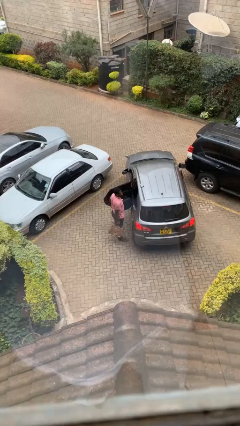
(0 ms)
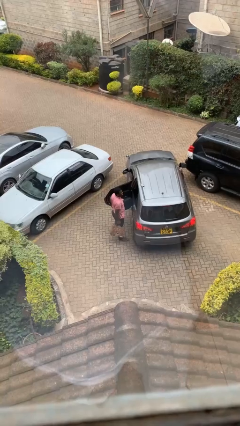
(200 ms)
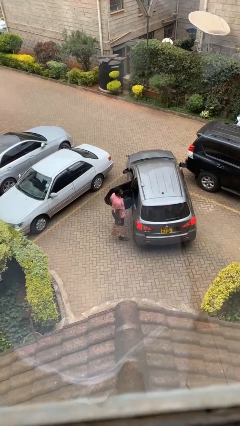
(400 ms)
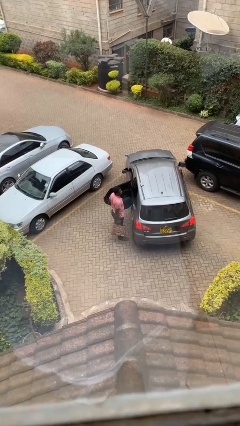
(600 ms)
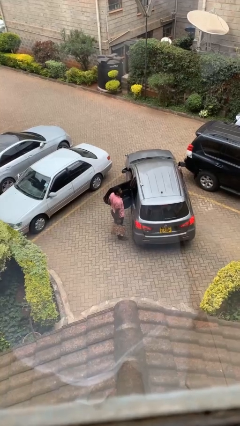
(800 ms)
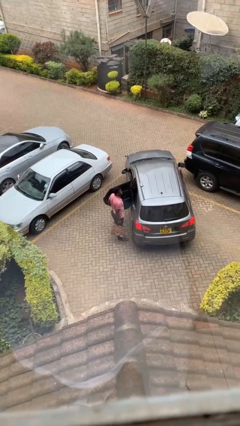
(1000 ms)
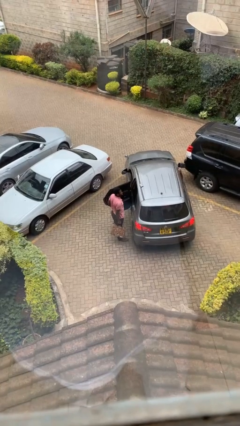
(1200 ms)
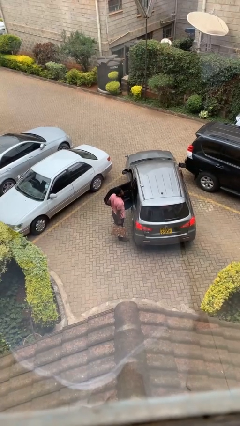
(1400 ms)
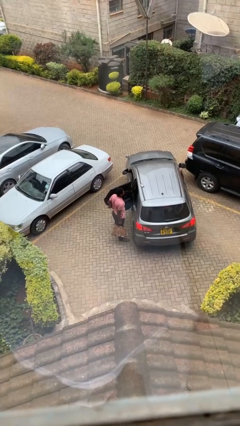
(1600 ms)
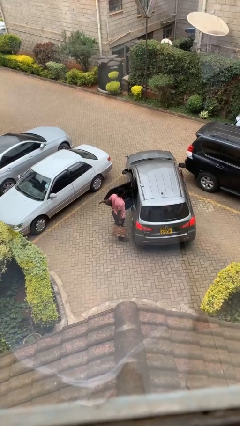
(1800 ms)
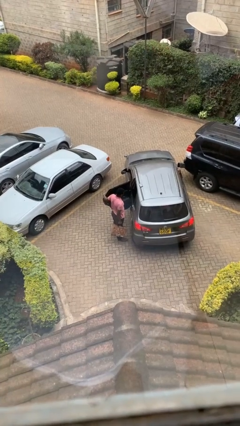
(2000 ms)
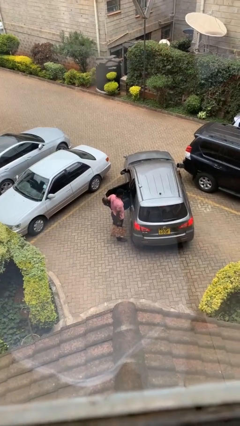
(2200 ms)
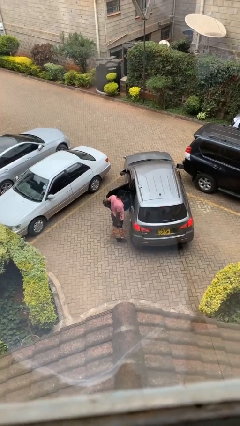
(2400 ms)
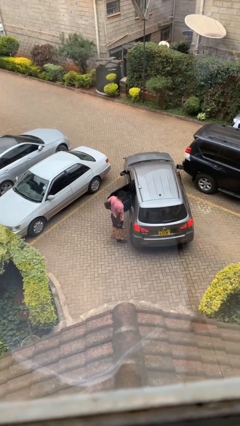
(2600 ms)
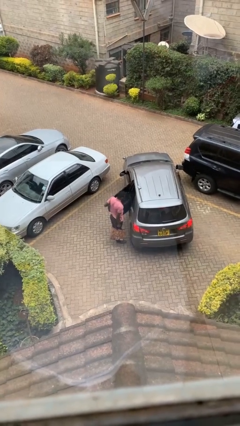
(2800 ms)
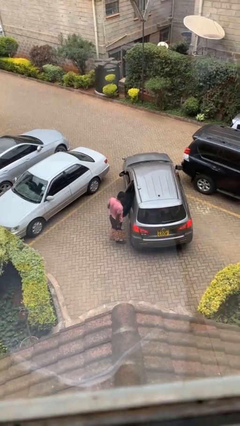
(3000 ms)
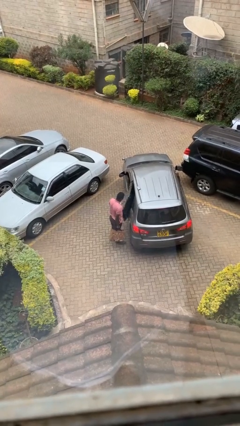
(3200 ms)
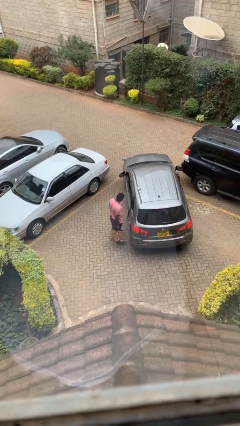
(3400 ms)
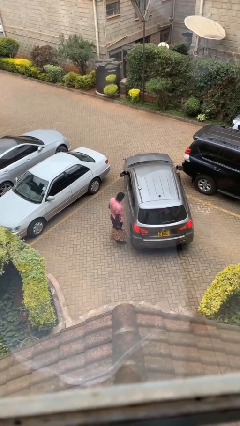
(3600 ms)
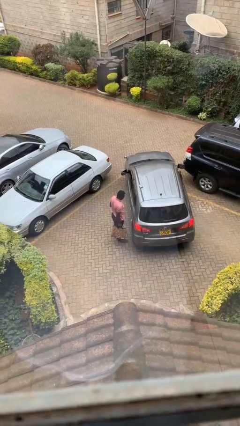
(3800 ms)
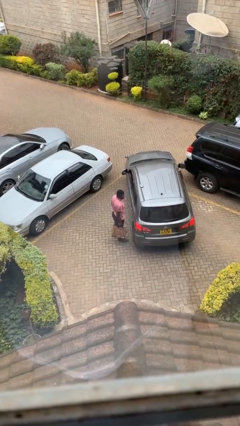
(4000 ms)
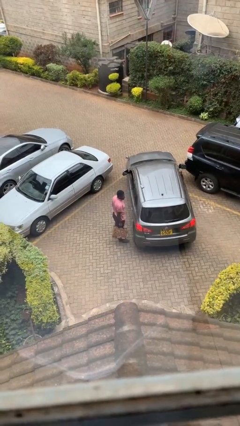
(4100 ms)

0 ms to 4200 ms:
person closes car door

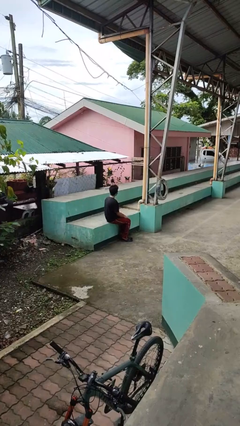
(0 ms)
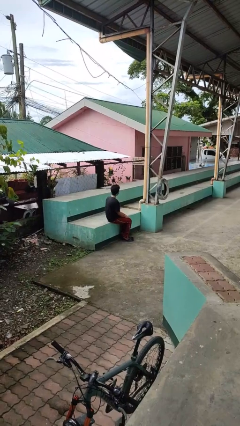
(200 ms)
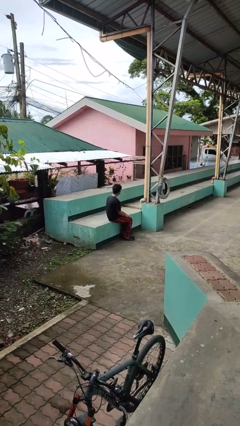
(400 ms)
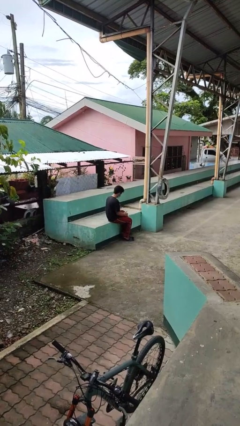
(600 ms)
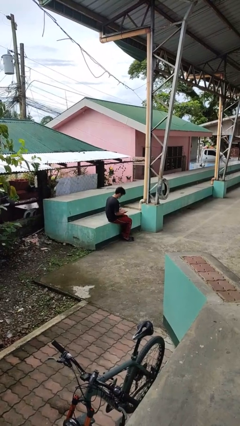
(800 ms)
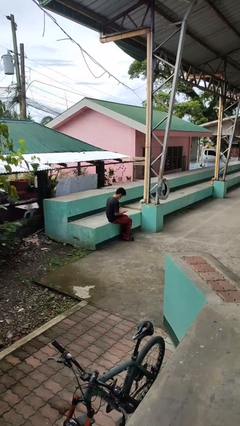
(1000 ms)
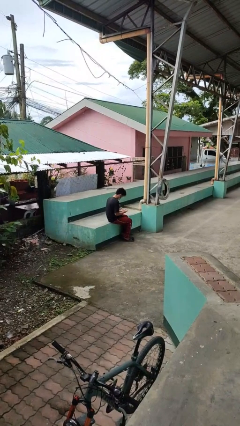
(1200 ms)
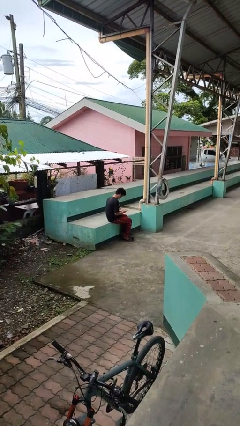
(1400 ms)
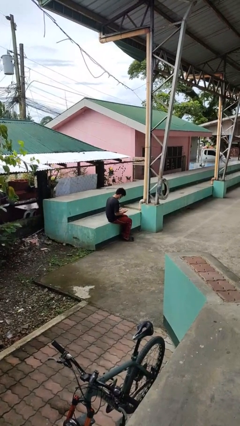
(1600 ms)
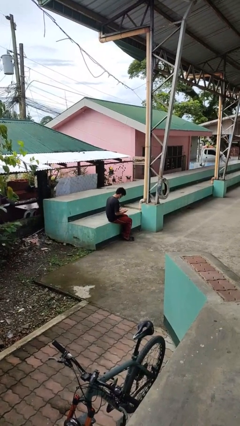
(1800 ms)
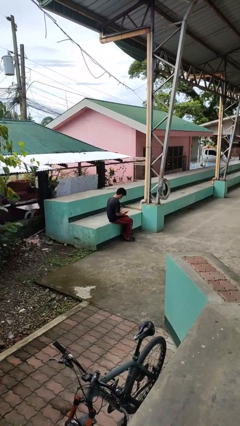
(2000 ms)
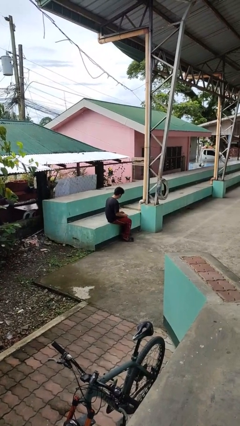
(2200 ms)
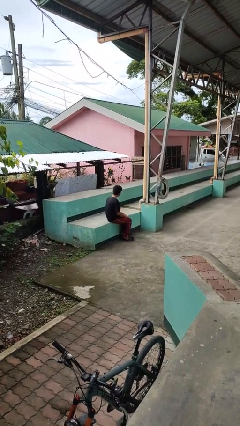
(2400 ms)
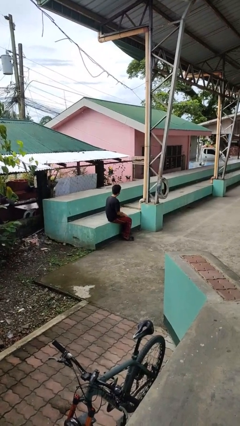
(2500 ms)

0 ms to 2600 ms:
person looks at hands in lap

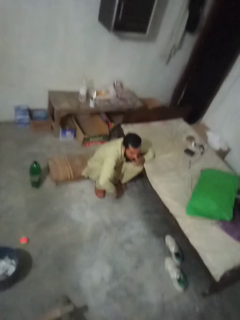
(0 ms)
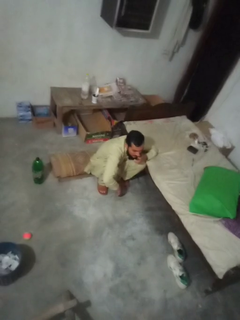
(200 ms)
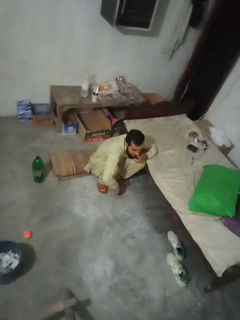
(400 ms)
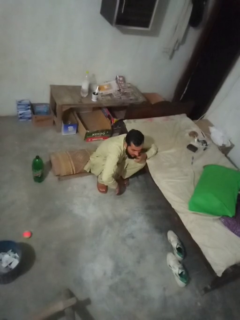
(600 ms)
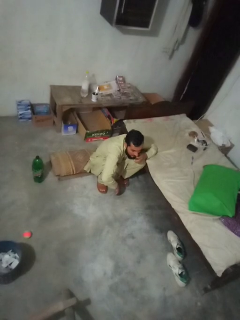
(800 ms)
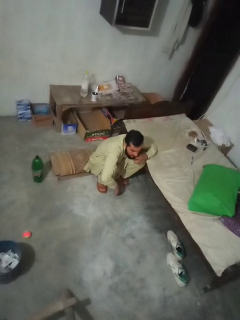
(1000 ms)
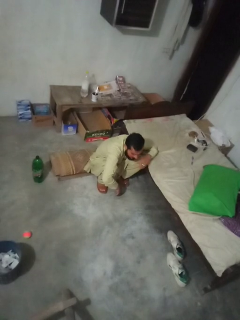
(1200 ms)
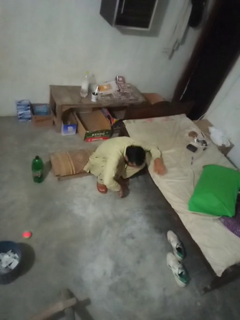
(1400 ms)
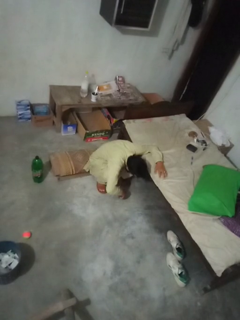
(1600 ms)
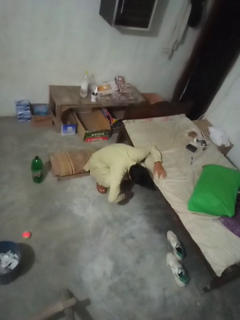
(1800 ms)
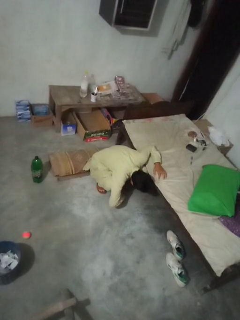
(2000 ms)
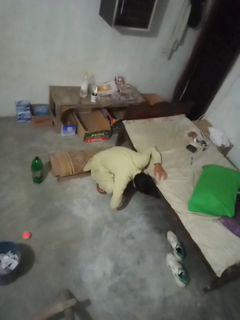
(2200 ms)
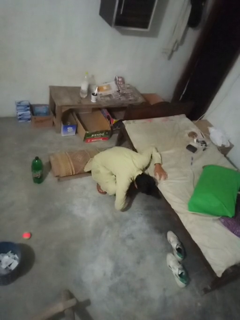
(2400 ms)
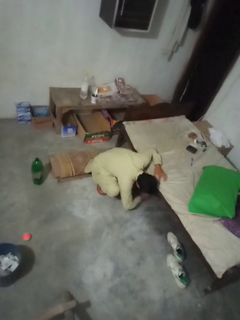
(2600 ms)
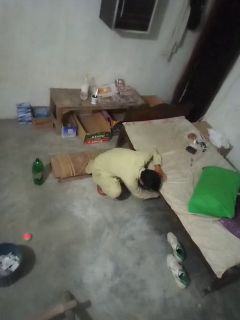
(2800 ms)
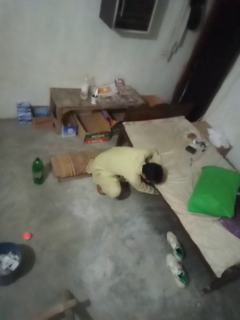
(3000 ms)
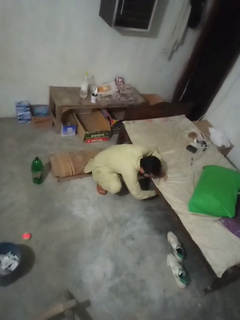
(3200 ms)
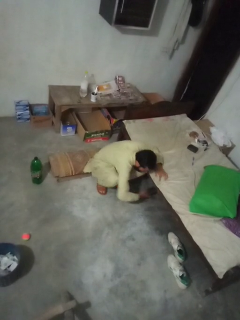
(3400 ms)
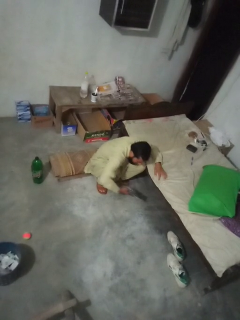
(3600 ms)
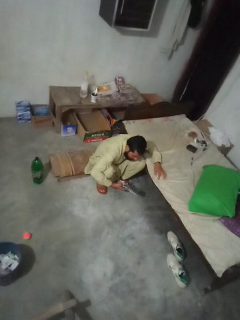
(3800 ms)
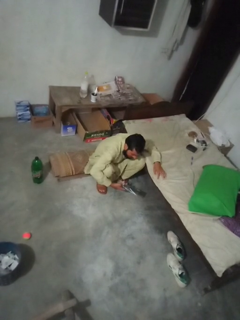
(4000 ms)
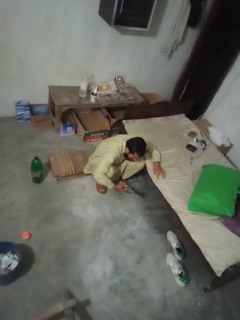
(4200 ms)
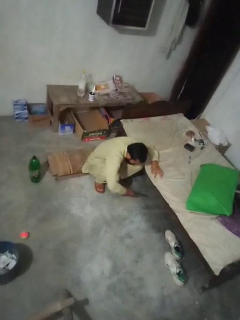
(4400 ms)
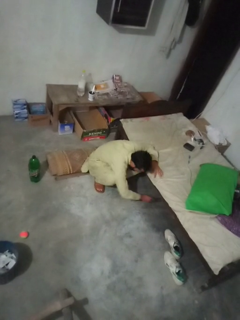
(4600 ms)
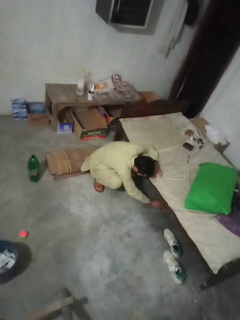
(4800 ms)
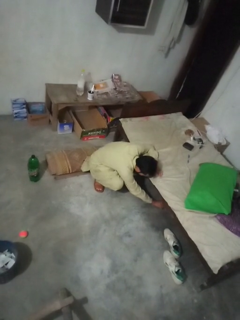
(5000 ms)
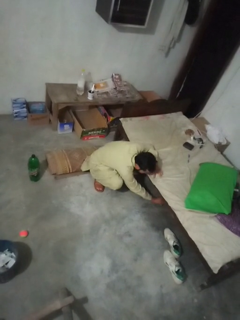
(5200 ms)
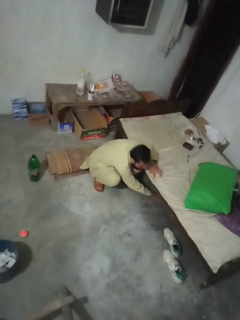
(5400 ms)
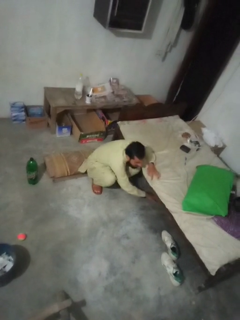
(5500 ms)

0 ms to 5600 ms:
person searches under couch

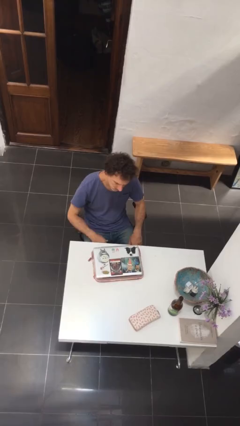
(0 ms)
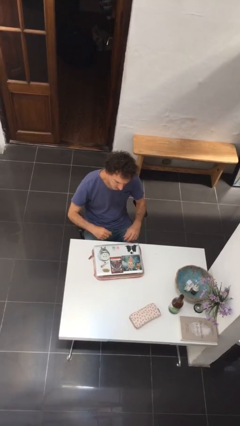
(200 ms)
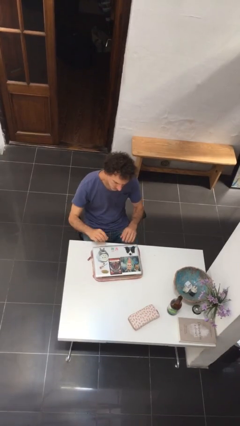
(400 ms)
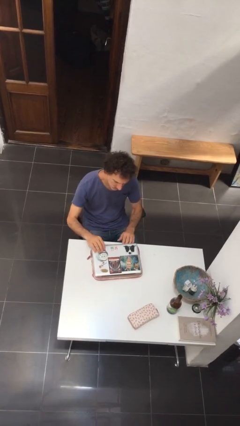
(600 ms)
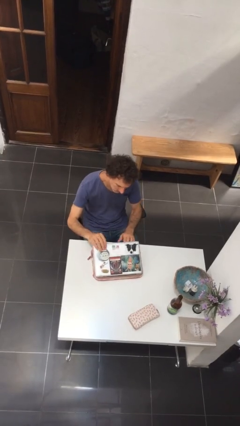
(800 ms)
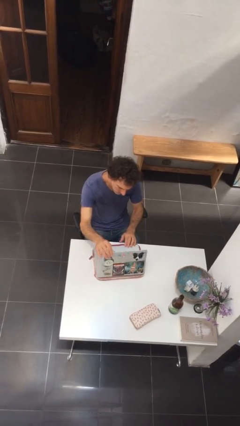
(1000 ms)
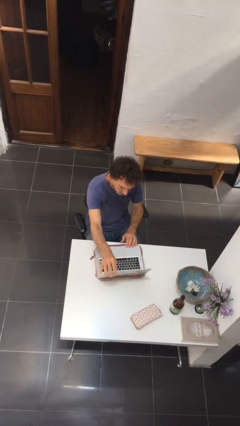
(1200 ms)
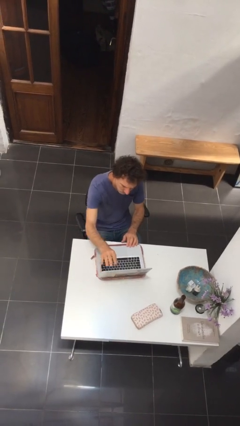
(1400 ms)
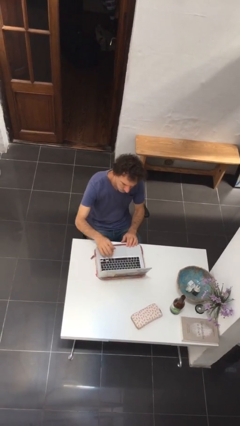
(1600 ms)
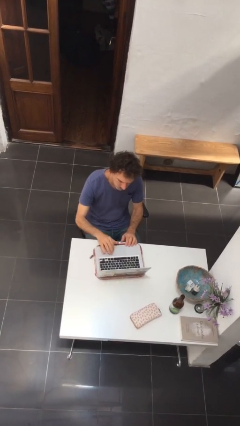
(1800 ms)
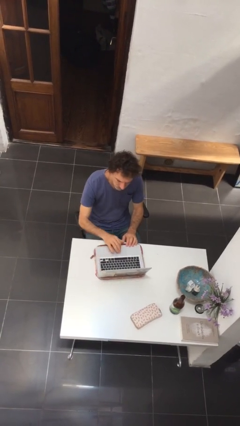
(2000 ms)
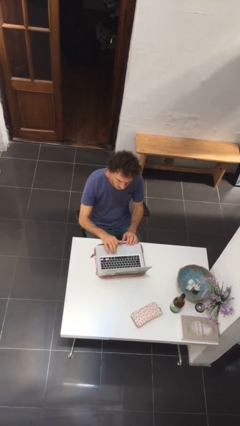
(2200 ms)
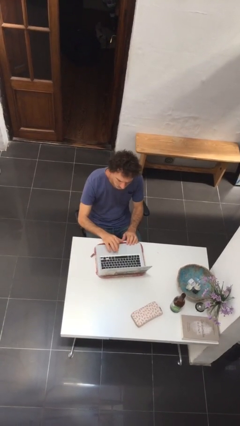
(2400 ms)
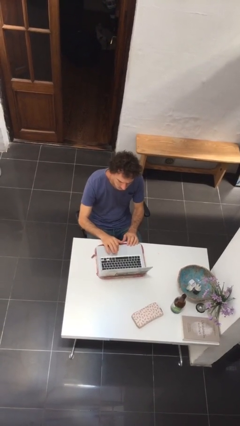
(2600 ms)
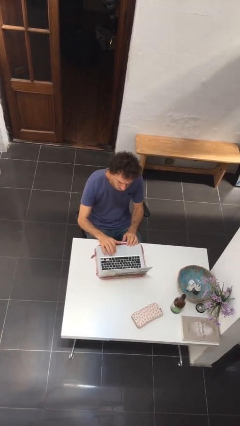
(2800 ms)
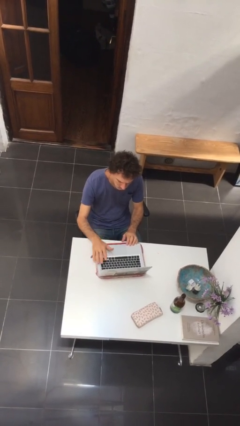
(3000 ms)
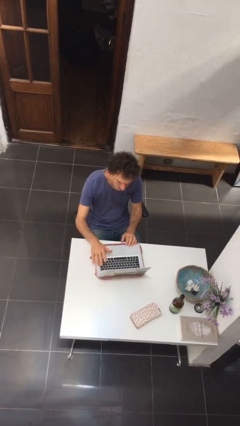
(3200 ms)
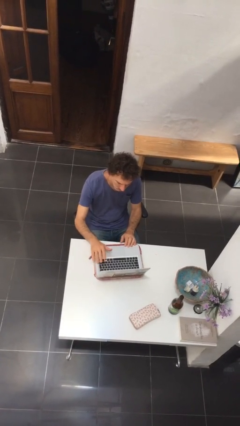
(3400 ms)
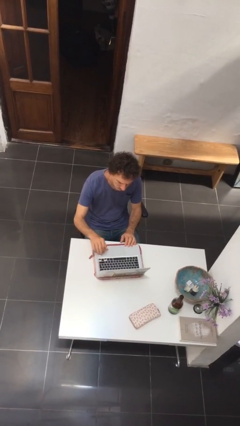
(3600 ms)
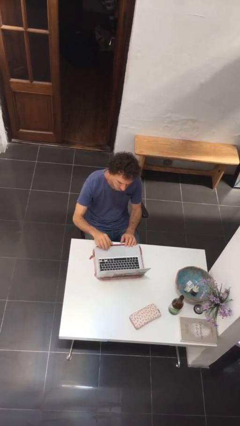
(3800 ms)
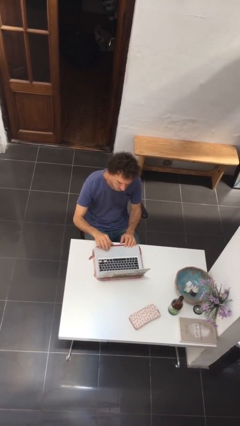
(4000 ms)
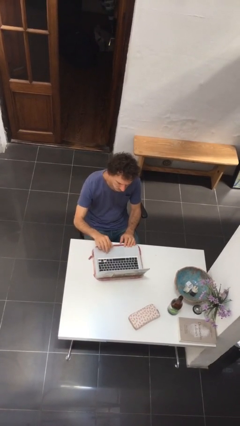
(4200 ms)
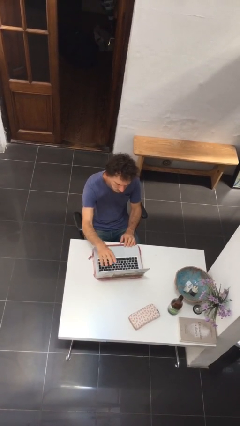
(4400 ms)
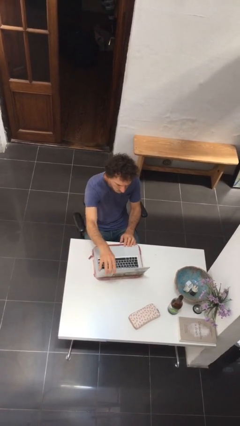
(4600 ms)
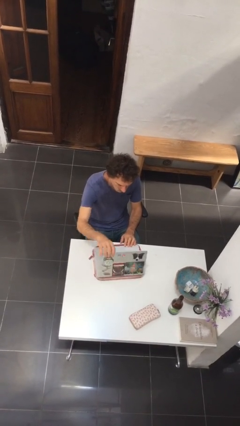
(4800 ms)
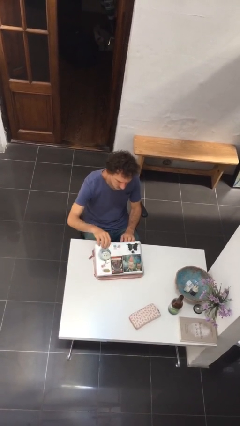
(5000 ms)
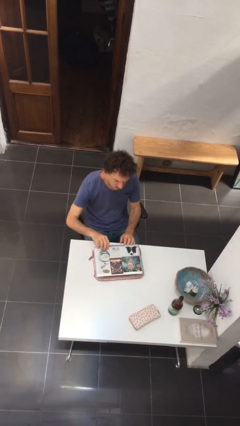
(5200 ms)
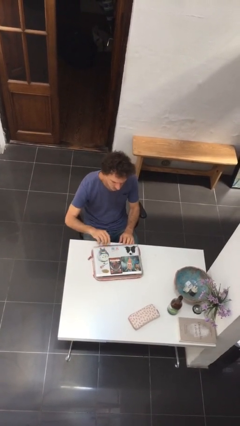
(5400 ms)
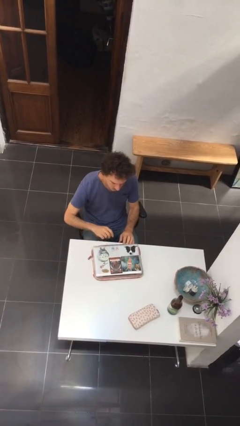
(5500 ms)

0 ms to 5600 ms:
person interacts with laptop

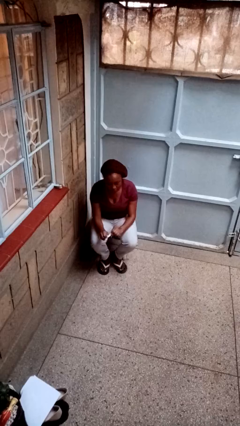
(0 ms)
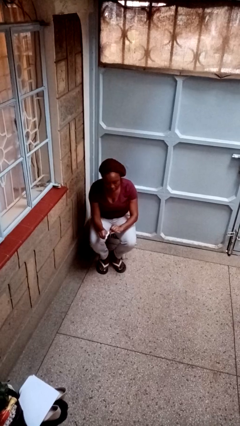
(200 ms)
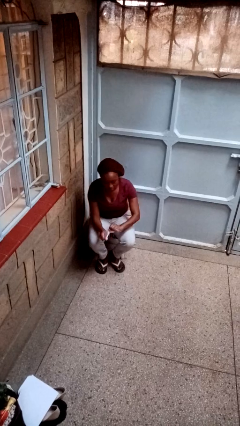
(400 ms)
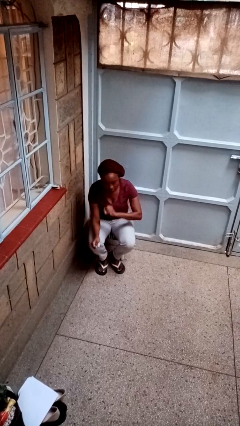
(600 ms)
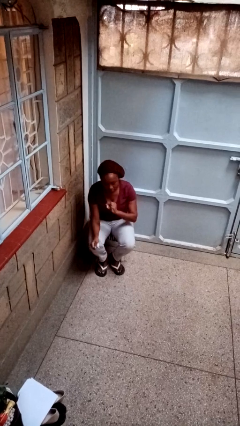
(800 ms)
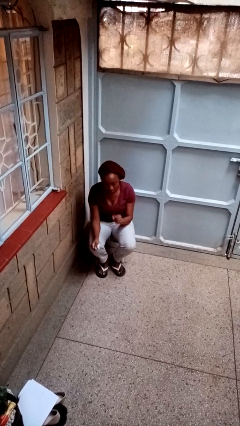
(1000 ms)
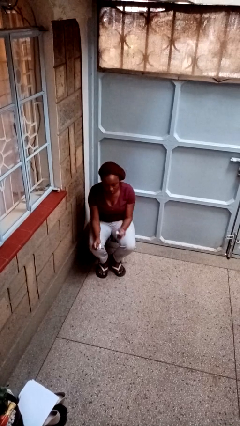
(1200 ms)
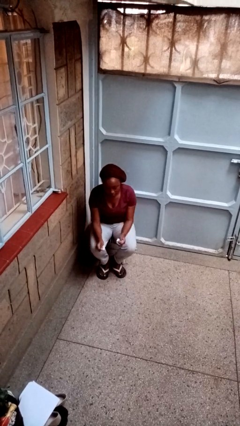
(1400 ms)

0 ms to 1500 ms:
person tears paper
